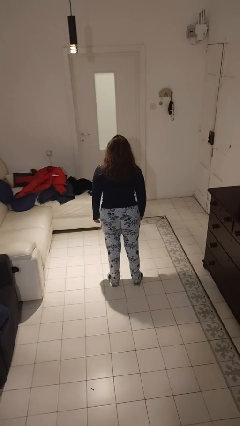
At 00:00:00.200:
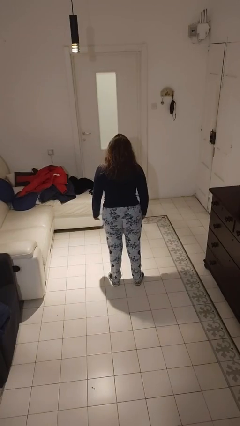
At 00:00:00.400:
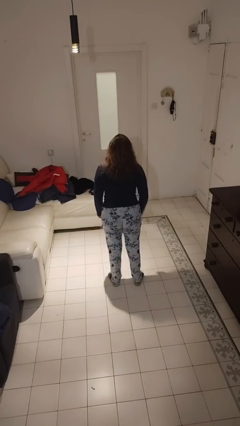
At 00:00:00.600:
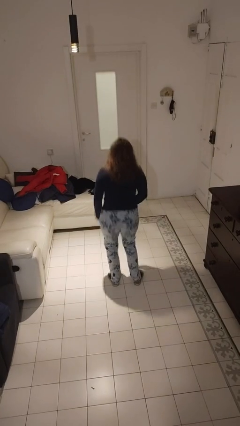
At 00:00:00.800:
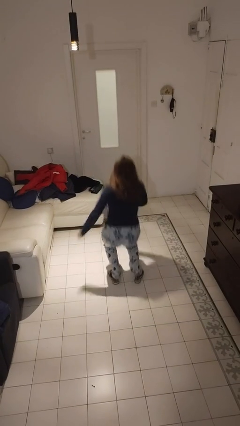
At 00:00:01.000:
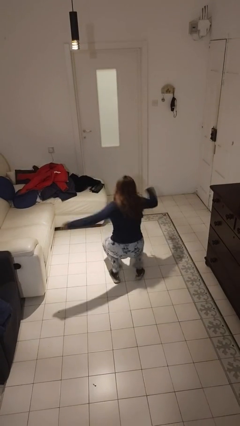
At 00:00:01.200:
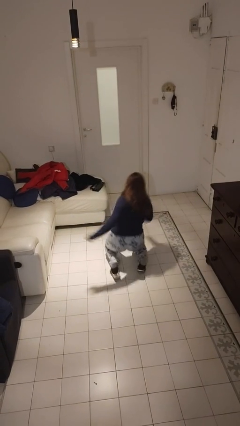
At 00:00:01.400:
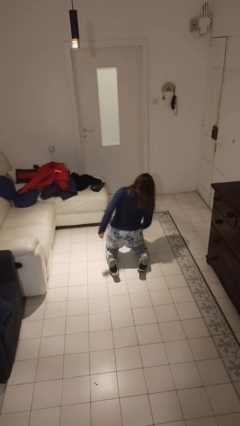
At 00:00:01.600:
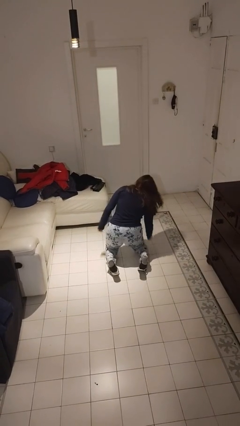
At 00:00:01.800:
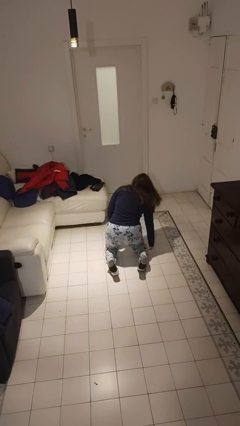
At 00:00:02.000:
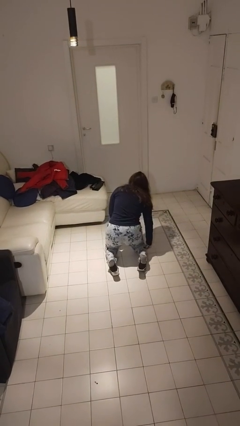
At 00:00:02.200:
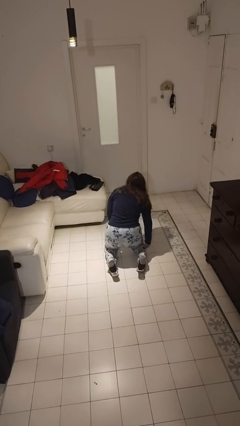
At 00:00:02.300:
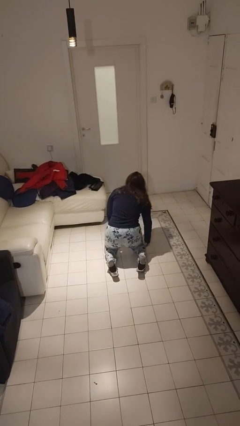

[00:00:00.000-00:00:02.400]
person falls while standing

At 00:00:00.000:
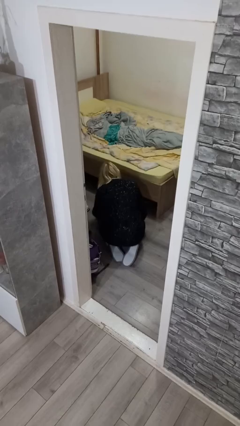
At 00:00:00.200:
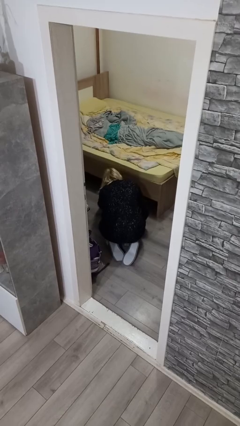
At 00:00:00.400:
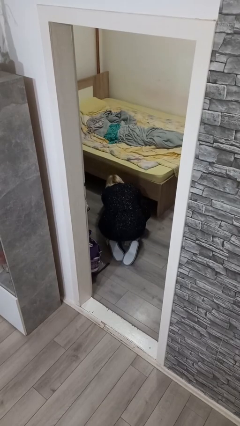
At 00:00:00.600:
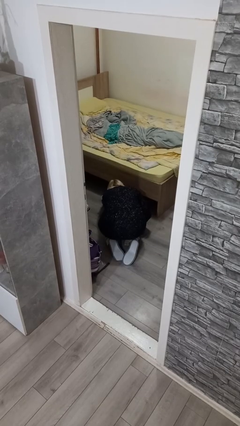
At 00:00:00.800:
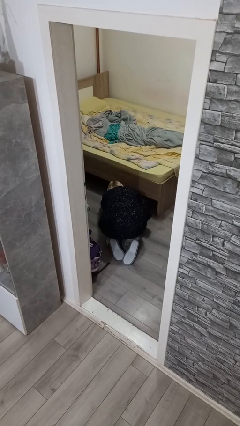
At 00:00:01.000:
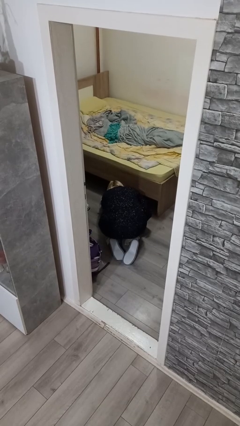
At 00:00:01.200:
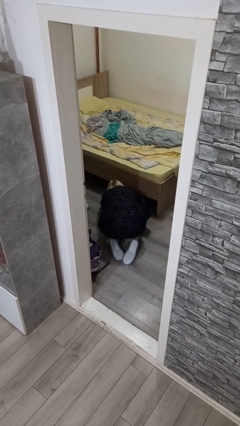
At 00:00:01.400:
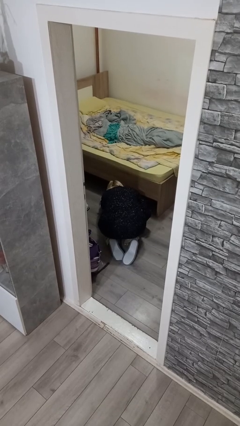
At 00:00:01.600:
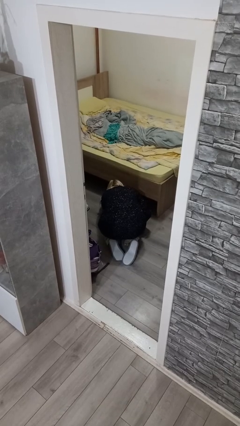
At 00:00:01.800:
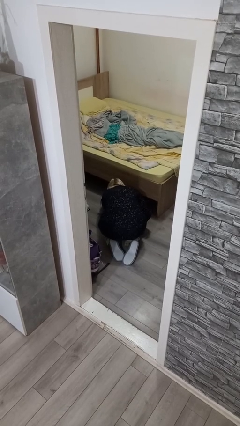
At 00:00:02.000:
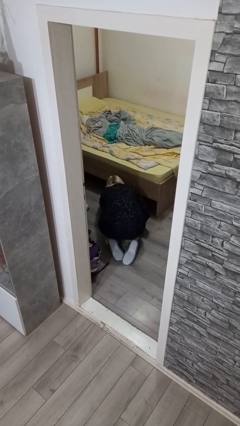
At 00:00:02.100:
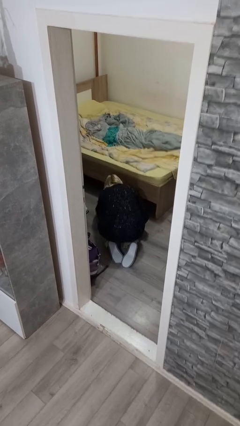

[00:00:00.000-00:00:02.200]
person searches under bed

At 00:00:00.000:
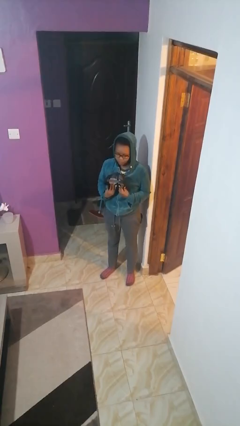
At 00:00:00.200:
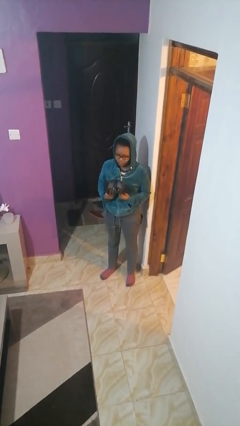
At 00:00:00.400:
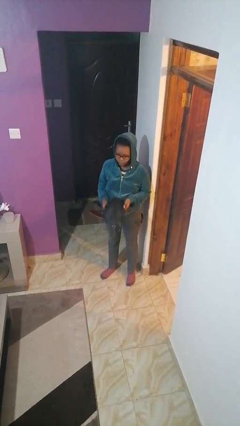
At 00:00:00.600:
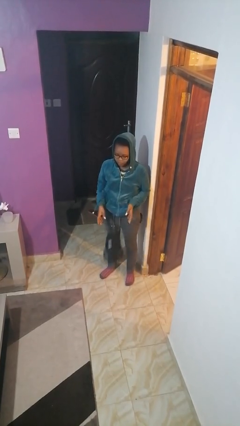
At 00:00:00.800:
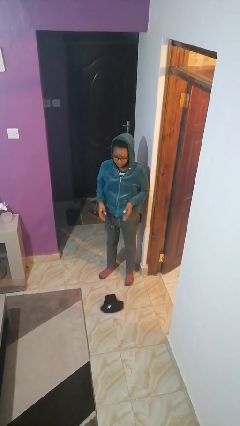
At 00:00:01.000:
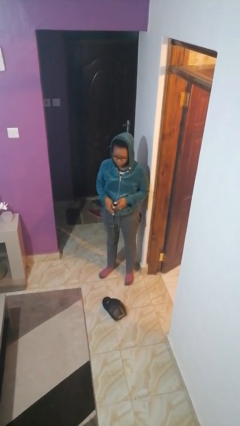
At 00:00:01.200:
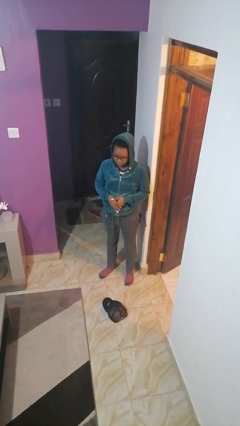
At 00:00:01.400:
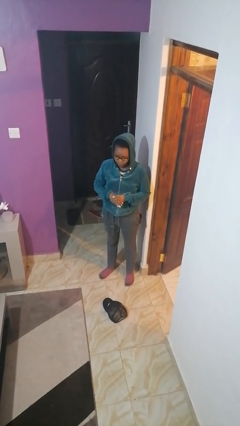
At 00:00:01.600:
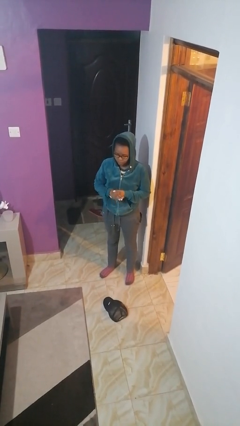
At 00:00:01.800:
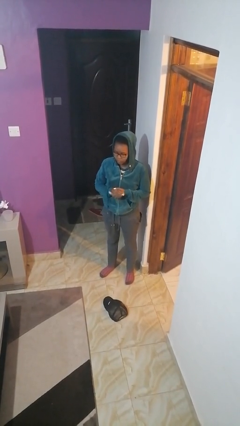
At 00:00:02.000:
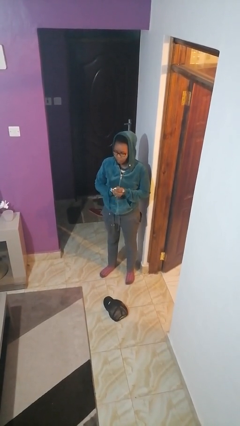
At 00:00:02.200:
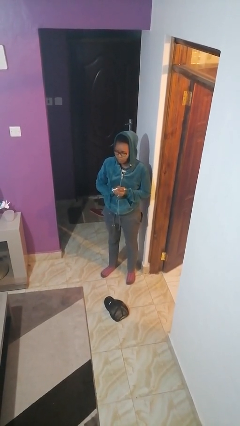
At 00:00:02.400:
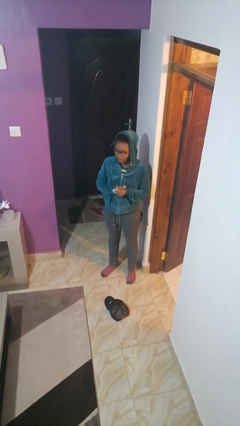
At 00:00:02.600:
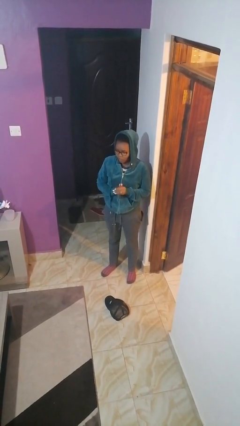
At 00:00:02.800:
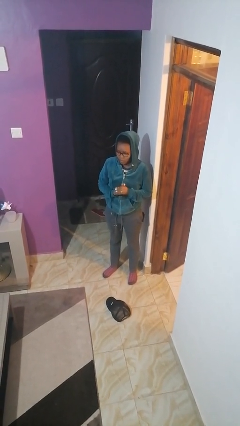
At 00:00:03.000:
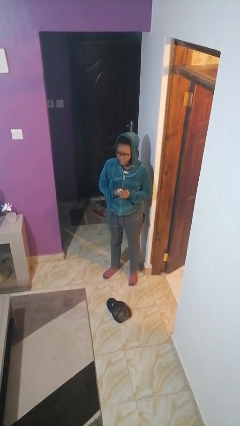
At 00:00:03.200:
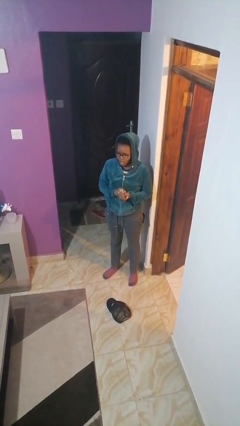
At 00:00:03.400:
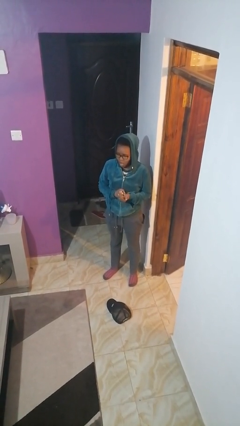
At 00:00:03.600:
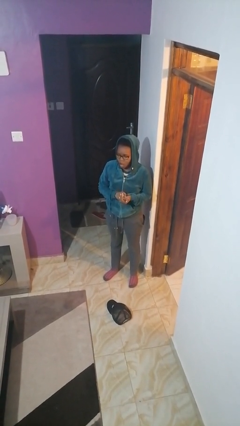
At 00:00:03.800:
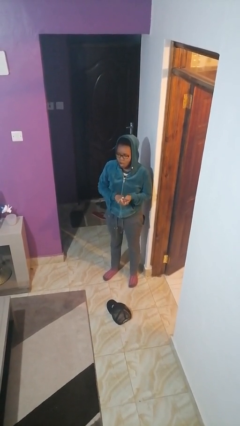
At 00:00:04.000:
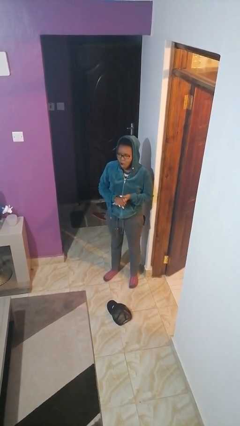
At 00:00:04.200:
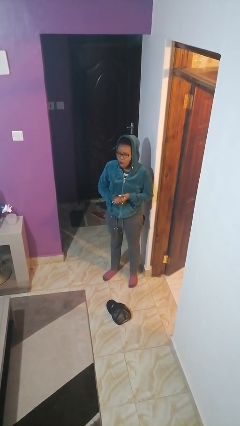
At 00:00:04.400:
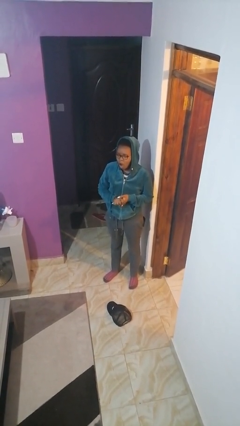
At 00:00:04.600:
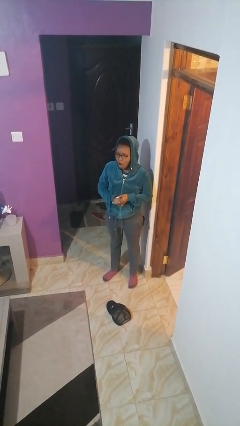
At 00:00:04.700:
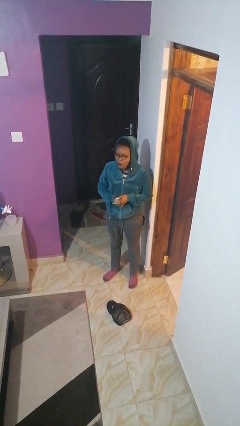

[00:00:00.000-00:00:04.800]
person drops object

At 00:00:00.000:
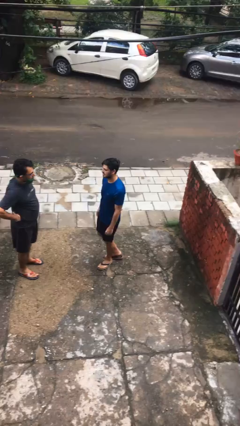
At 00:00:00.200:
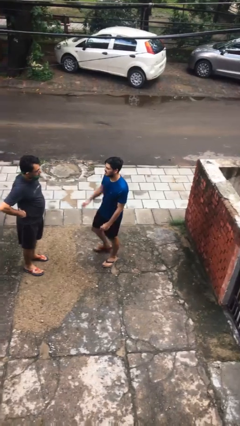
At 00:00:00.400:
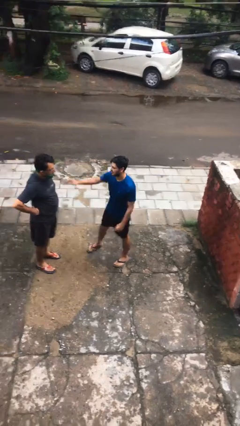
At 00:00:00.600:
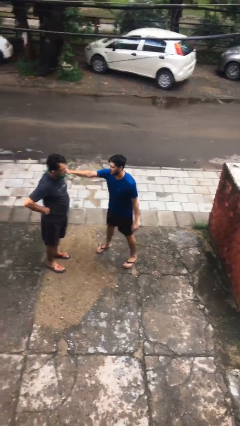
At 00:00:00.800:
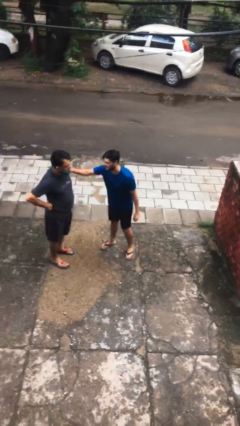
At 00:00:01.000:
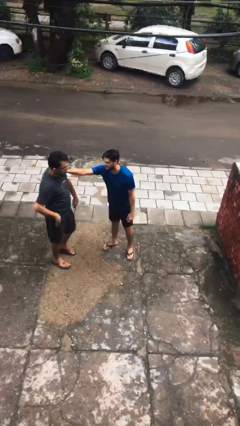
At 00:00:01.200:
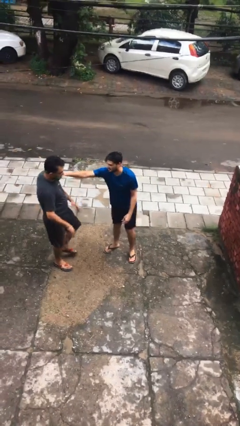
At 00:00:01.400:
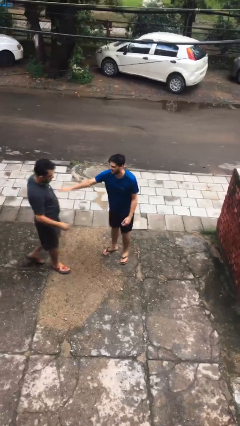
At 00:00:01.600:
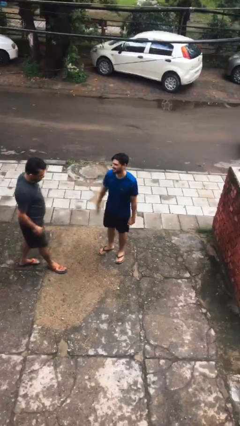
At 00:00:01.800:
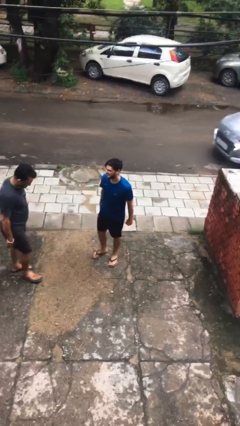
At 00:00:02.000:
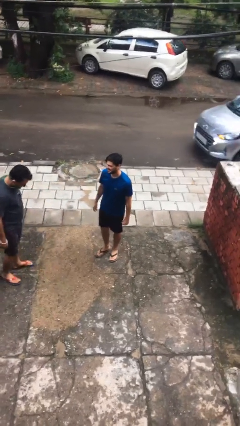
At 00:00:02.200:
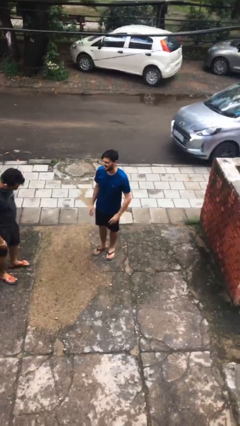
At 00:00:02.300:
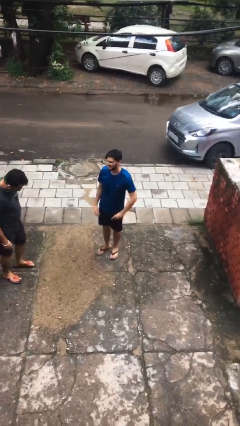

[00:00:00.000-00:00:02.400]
person shoves person

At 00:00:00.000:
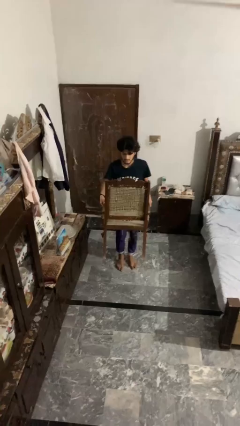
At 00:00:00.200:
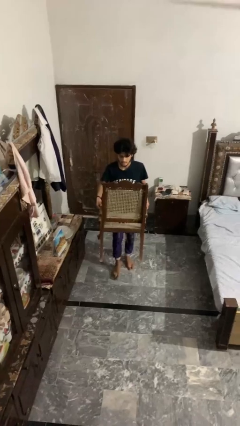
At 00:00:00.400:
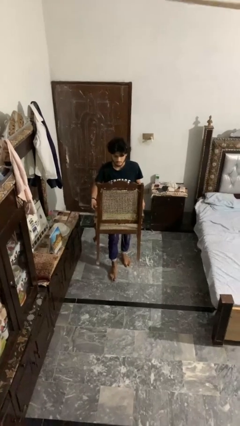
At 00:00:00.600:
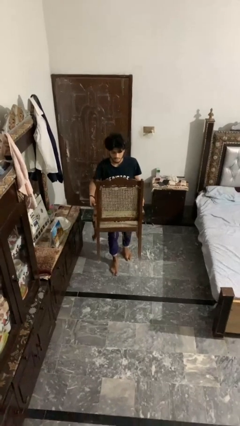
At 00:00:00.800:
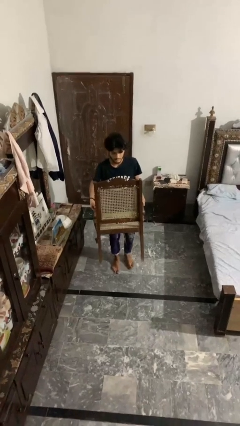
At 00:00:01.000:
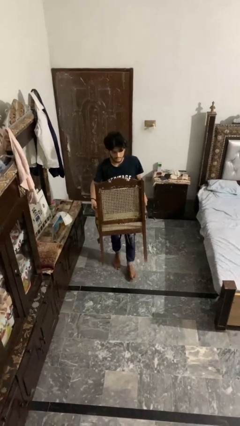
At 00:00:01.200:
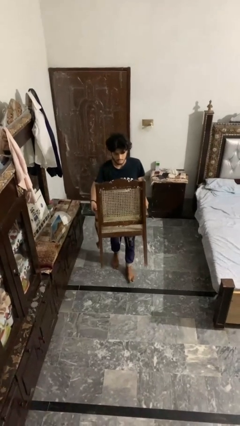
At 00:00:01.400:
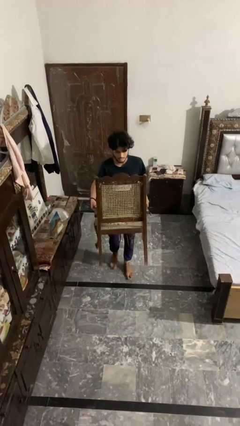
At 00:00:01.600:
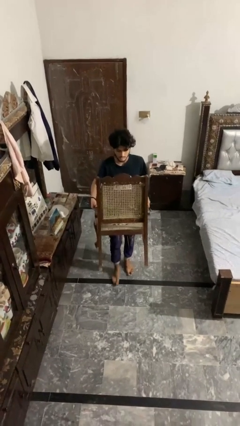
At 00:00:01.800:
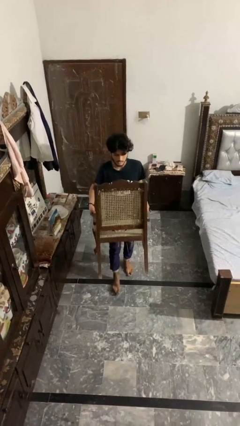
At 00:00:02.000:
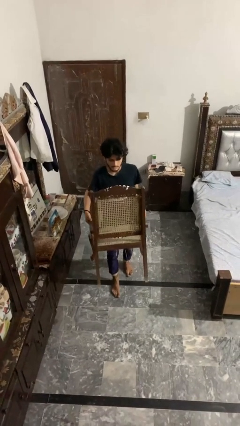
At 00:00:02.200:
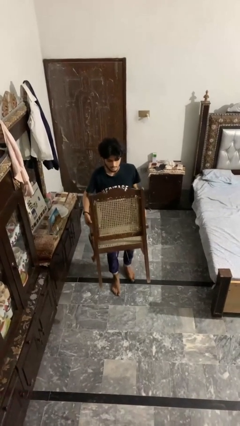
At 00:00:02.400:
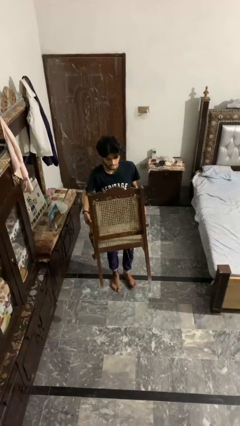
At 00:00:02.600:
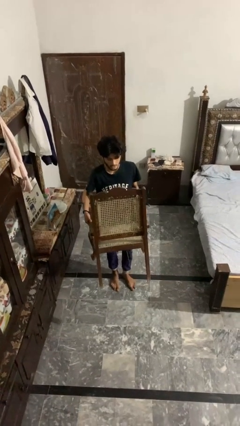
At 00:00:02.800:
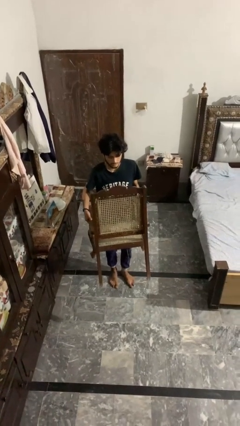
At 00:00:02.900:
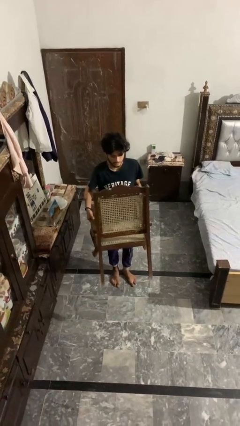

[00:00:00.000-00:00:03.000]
person carries furniture

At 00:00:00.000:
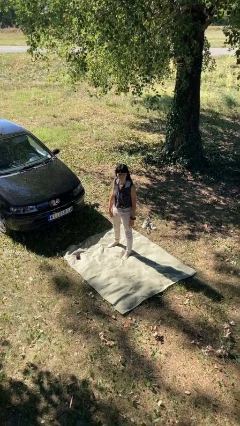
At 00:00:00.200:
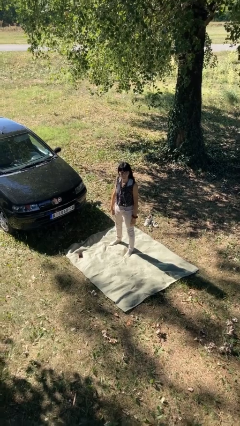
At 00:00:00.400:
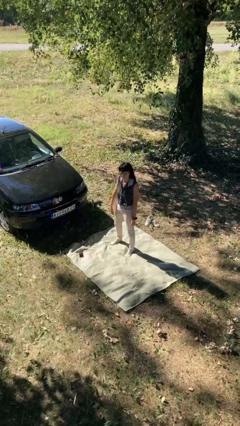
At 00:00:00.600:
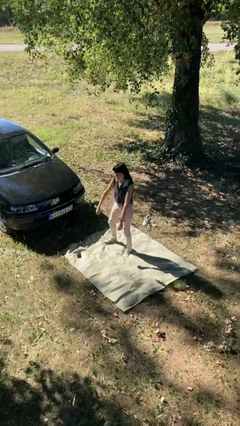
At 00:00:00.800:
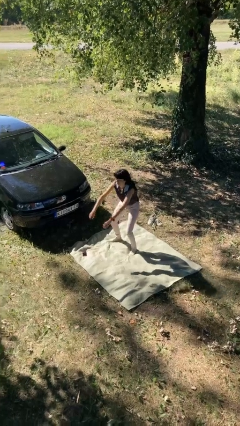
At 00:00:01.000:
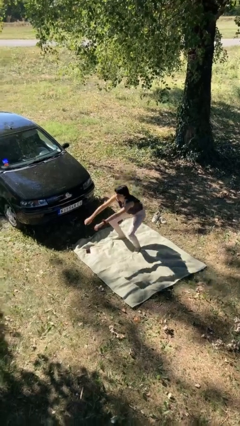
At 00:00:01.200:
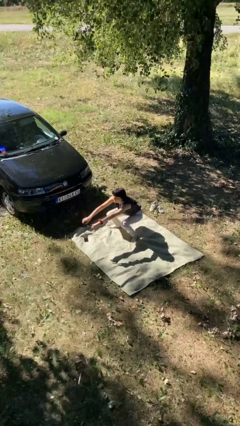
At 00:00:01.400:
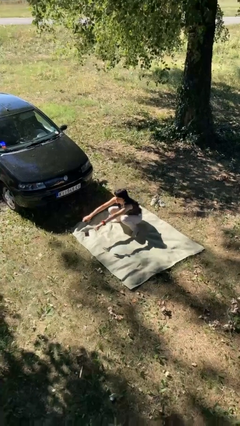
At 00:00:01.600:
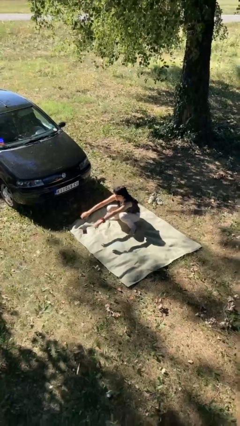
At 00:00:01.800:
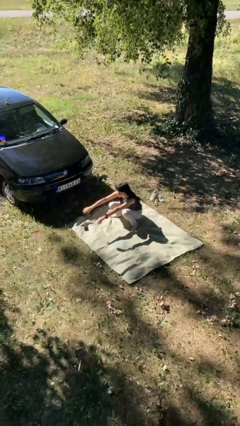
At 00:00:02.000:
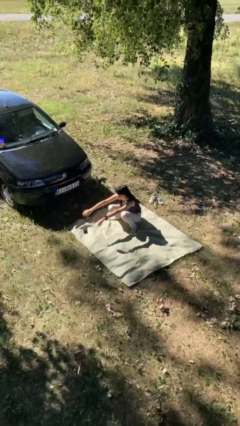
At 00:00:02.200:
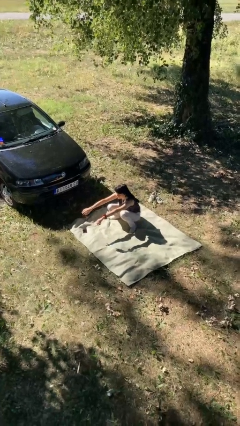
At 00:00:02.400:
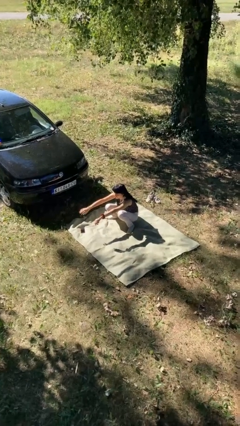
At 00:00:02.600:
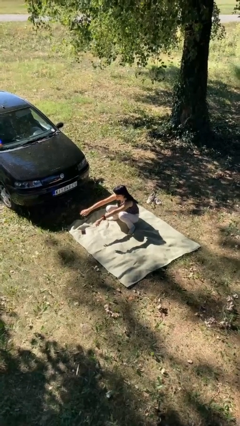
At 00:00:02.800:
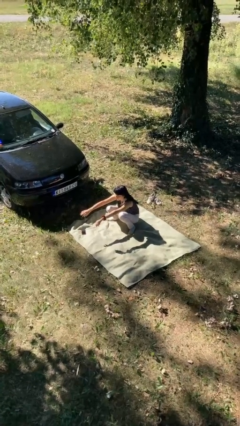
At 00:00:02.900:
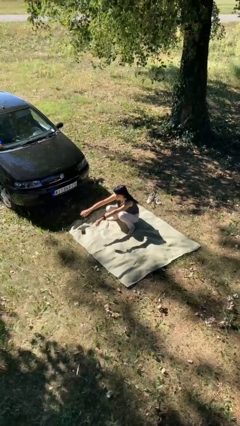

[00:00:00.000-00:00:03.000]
person squats
